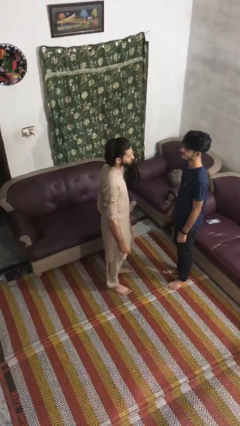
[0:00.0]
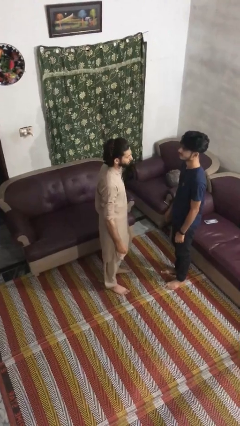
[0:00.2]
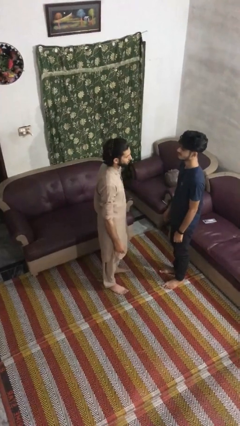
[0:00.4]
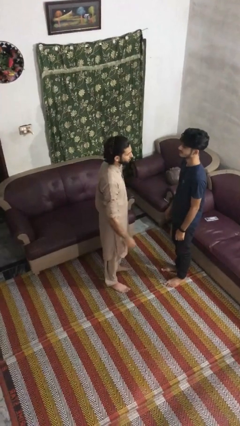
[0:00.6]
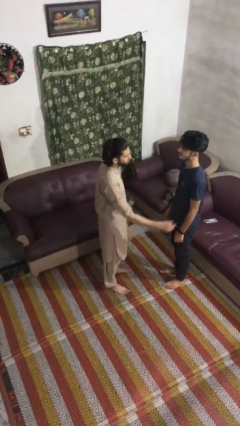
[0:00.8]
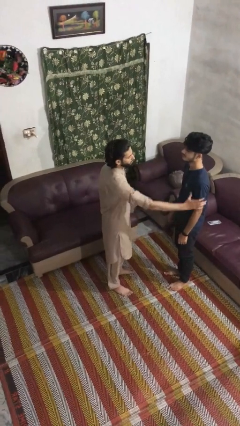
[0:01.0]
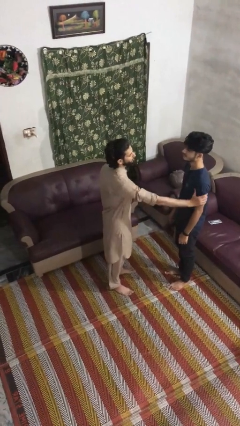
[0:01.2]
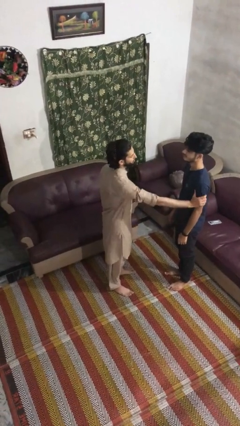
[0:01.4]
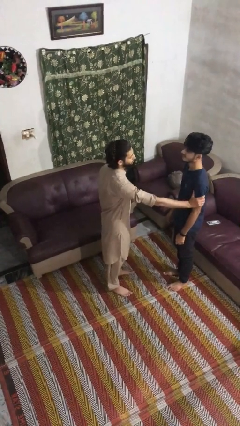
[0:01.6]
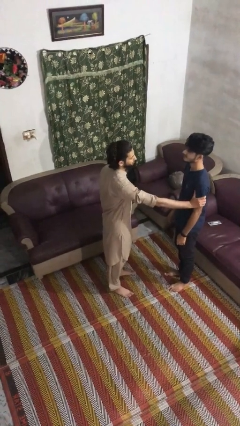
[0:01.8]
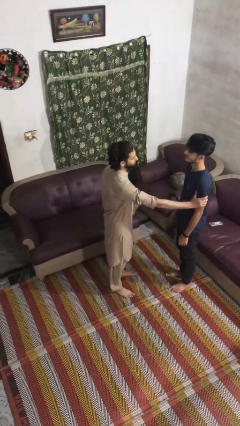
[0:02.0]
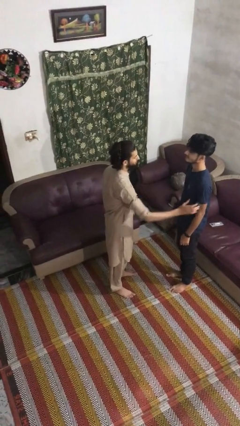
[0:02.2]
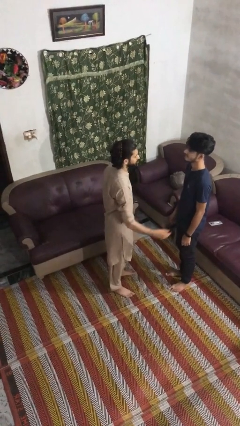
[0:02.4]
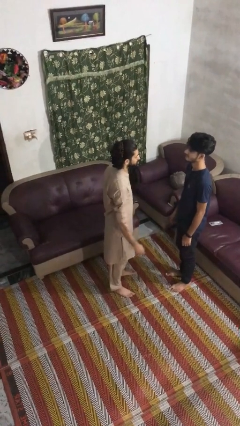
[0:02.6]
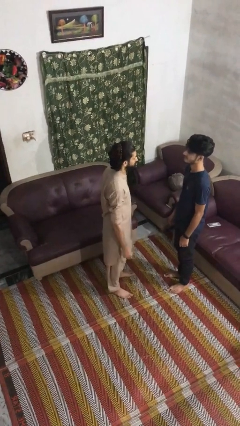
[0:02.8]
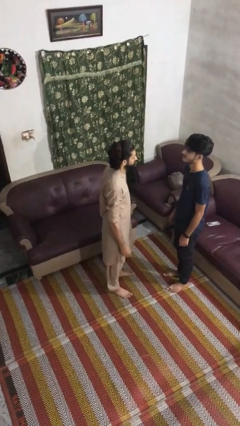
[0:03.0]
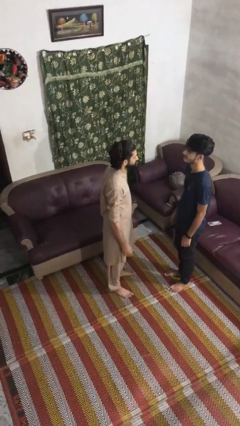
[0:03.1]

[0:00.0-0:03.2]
person grabs person by bicep

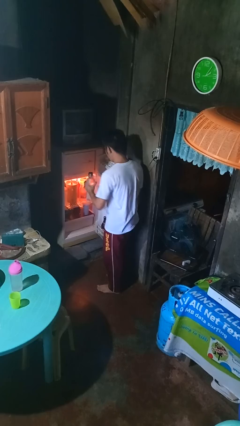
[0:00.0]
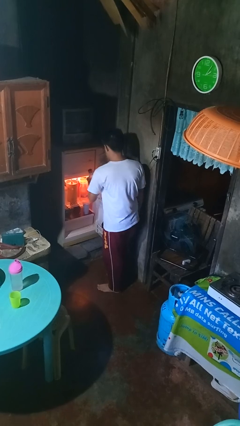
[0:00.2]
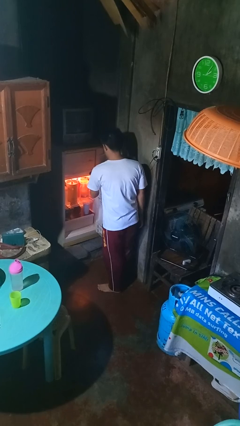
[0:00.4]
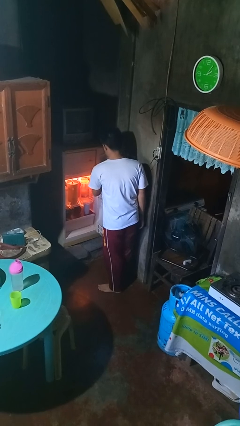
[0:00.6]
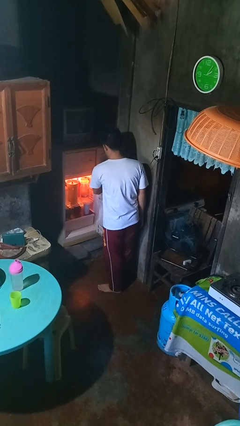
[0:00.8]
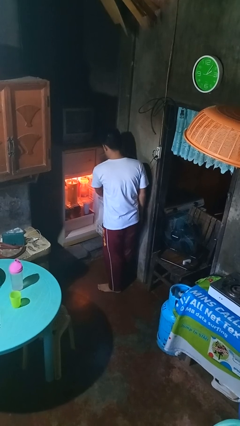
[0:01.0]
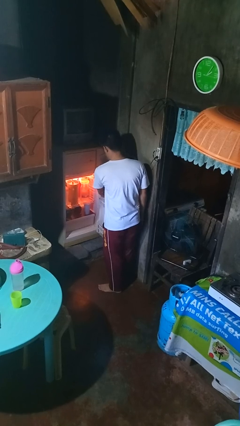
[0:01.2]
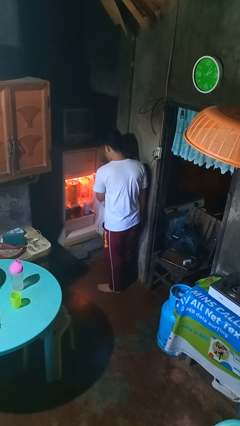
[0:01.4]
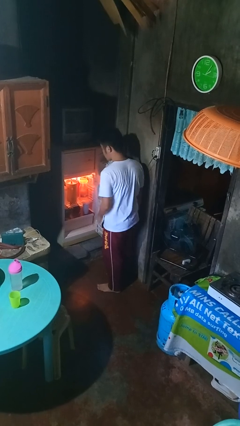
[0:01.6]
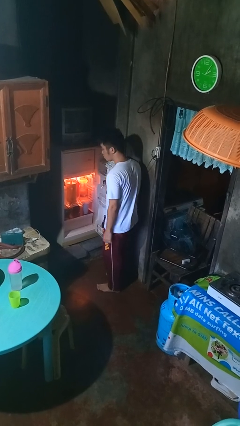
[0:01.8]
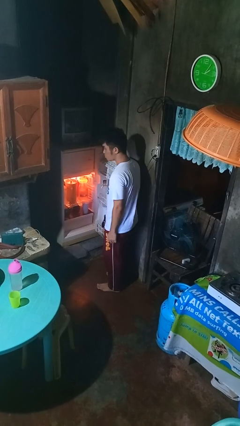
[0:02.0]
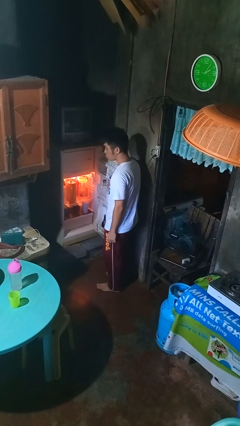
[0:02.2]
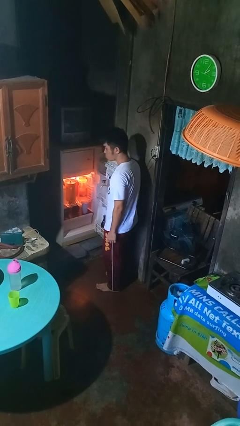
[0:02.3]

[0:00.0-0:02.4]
person puts object into refrigerator

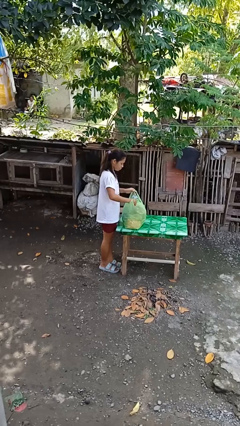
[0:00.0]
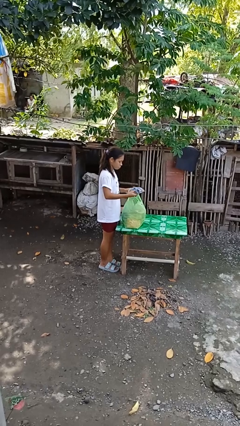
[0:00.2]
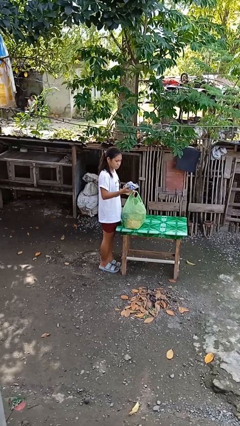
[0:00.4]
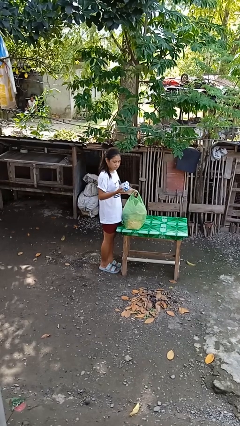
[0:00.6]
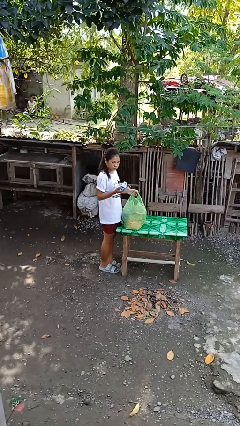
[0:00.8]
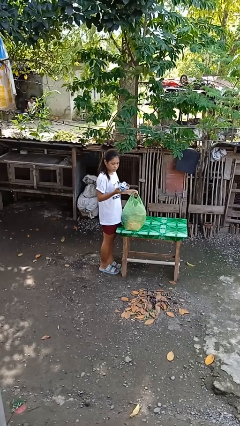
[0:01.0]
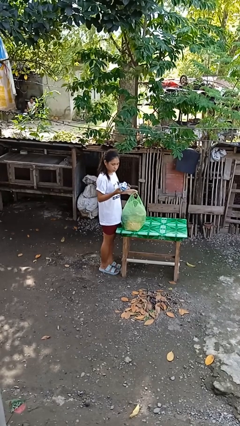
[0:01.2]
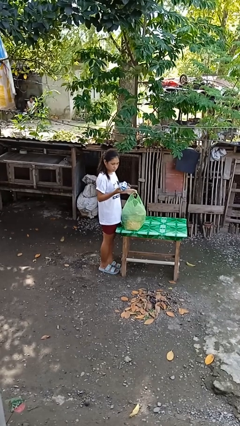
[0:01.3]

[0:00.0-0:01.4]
person hits person with pillow

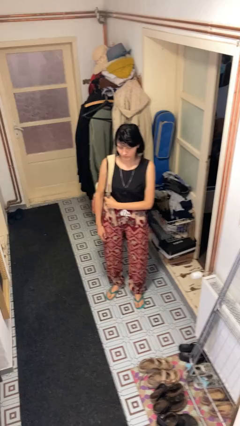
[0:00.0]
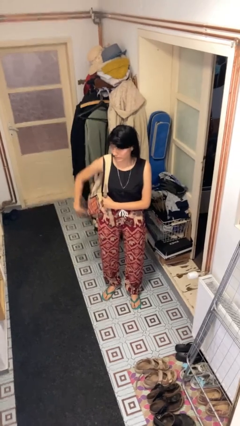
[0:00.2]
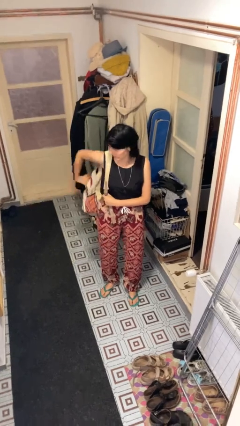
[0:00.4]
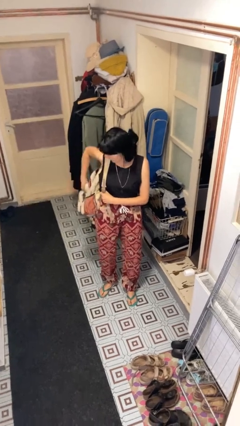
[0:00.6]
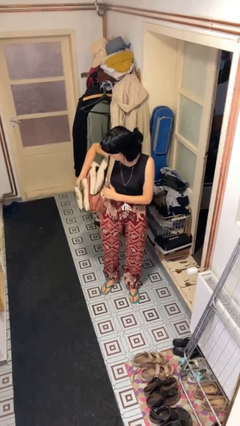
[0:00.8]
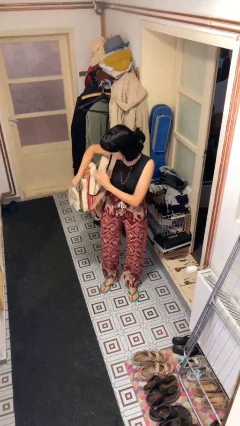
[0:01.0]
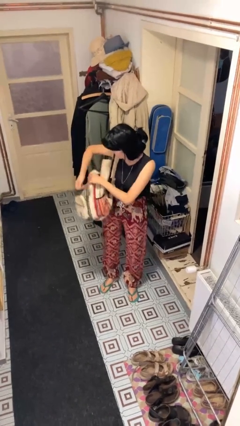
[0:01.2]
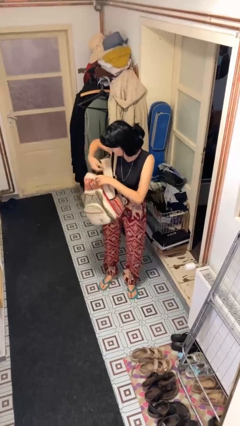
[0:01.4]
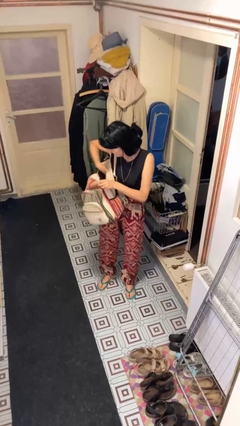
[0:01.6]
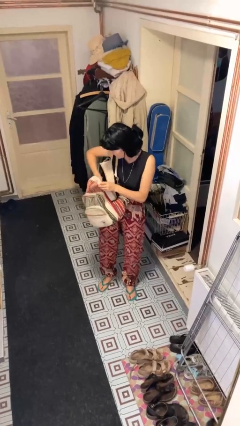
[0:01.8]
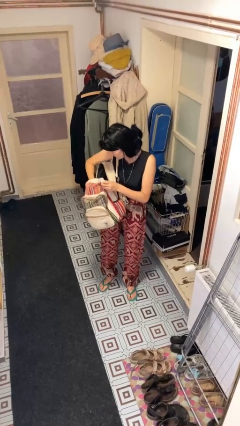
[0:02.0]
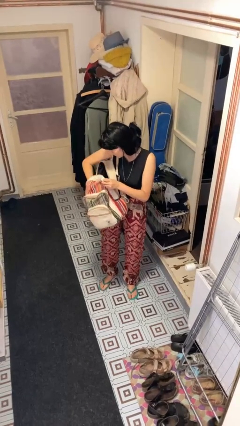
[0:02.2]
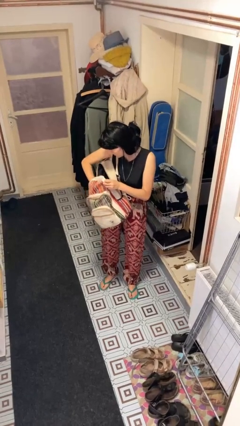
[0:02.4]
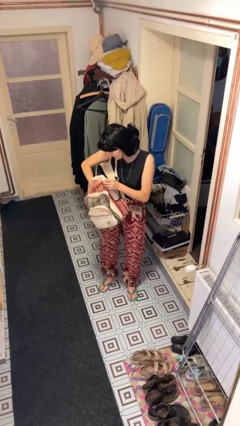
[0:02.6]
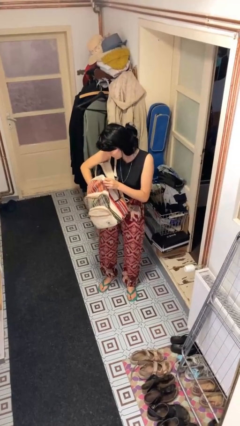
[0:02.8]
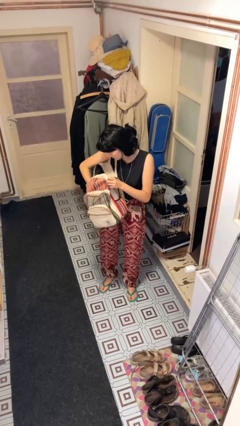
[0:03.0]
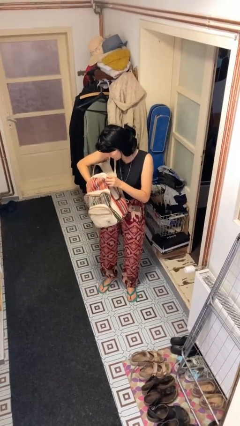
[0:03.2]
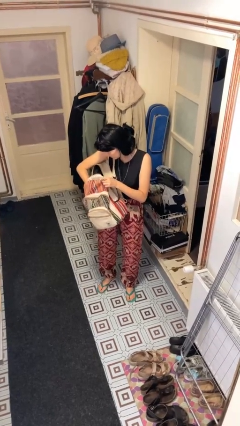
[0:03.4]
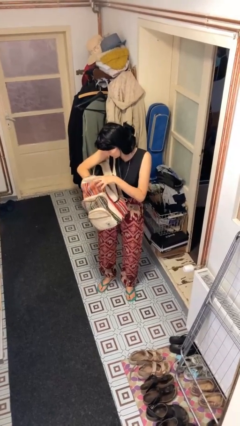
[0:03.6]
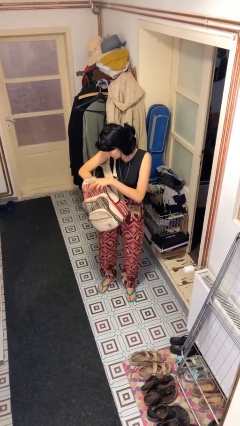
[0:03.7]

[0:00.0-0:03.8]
person searches in backpack

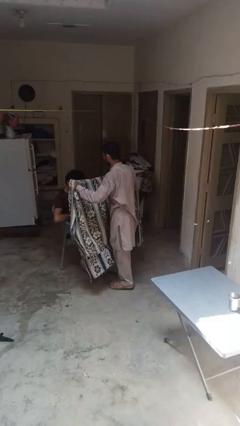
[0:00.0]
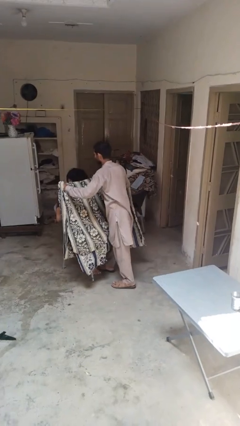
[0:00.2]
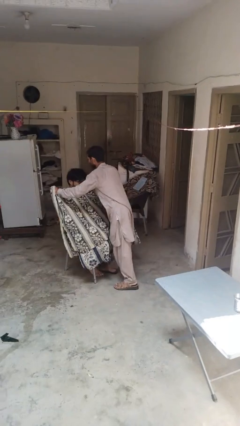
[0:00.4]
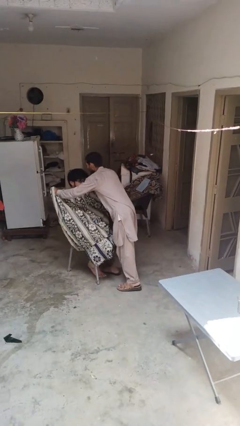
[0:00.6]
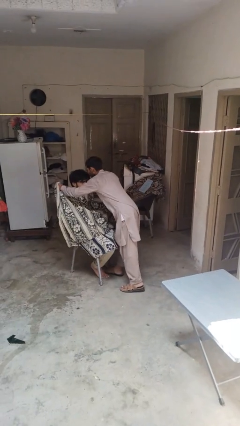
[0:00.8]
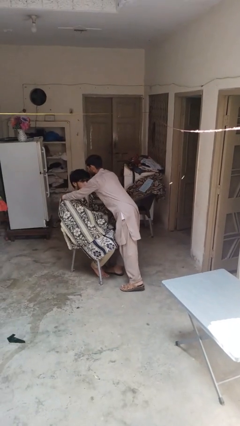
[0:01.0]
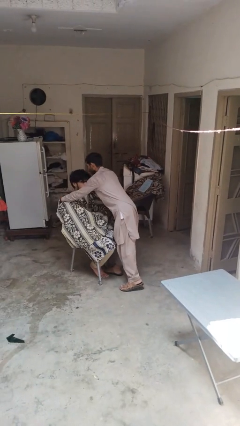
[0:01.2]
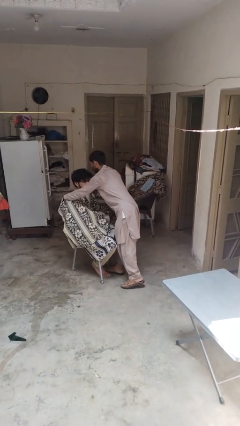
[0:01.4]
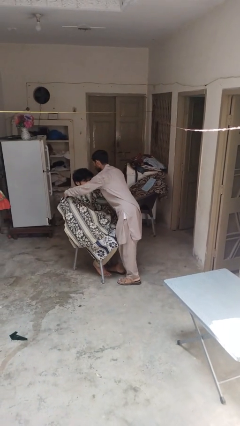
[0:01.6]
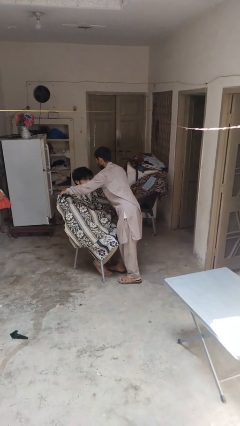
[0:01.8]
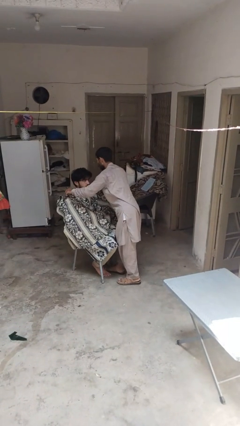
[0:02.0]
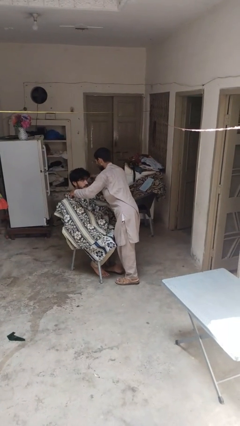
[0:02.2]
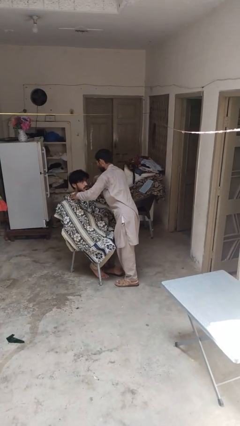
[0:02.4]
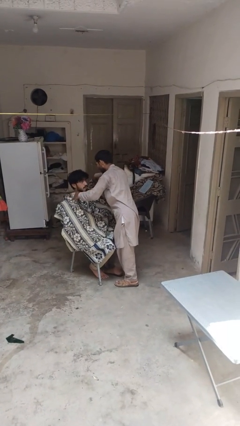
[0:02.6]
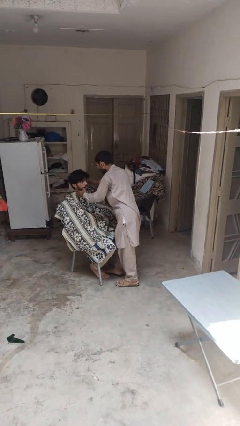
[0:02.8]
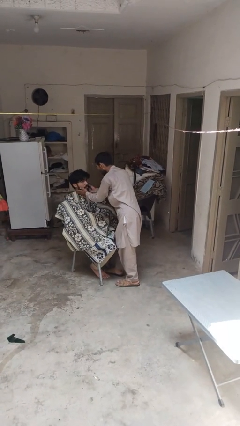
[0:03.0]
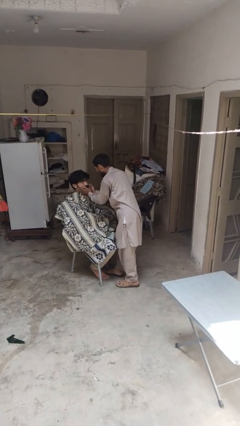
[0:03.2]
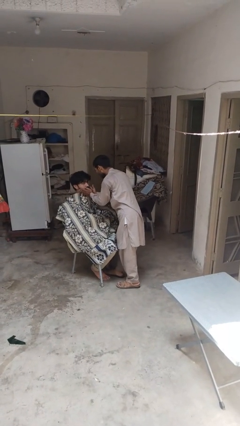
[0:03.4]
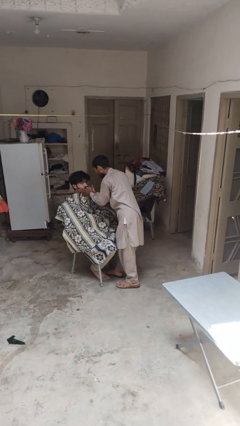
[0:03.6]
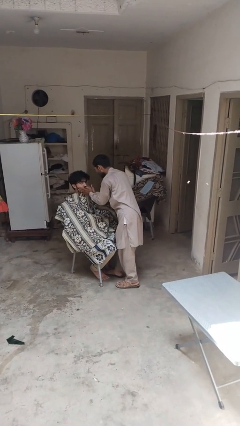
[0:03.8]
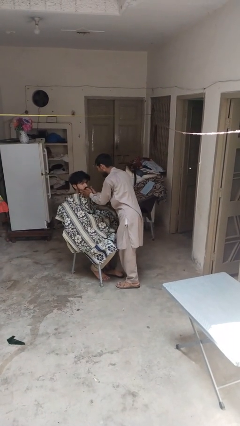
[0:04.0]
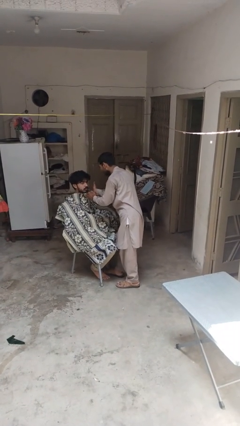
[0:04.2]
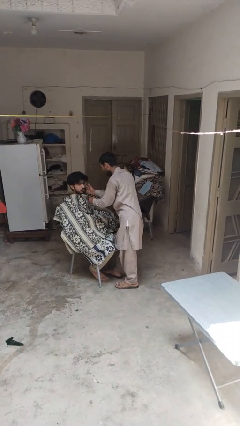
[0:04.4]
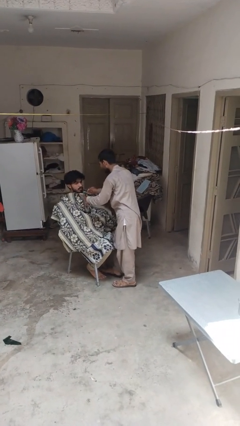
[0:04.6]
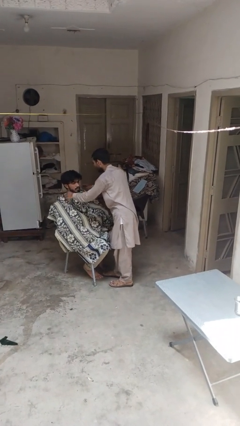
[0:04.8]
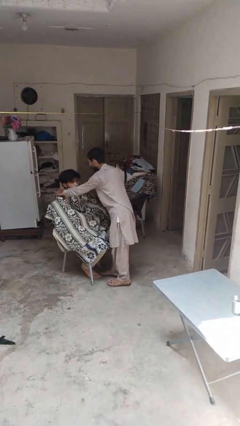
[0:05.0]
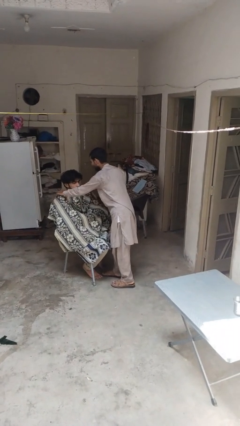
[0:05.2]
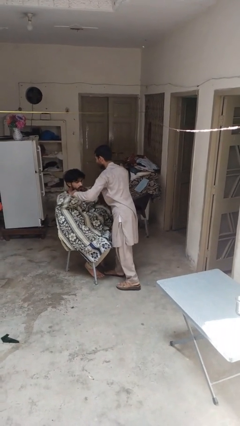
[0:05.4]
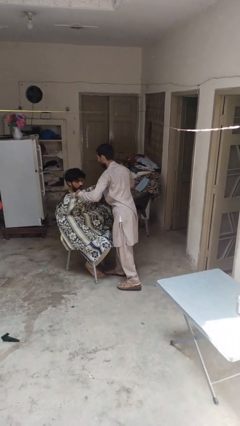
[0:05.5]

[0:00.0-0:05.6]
person covers friend with blanket

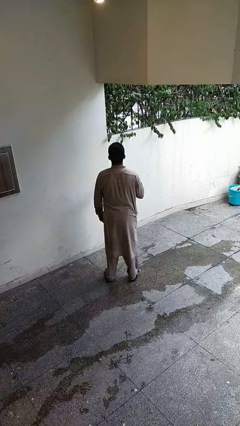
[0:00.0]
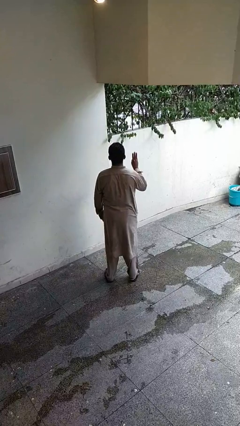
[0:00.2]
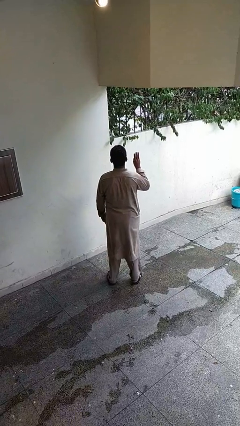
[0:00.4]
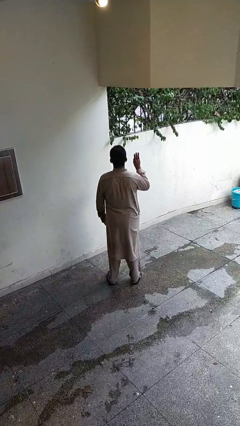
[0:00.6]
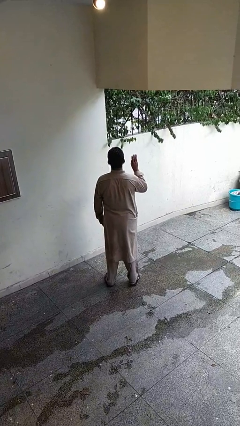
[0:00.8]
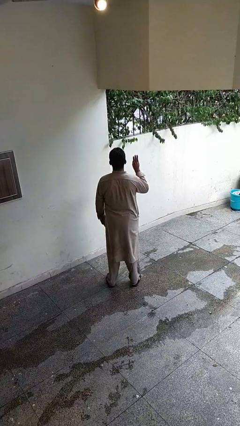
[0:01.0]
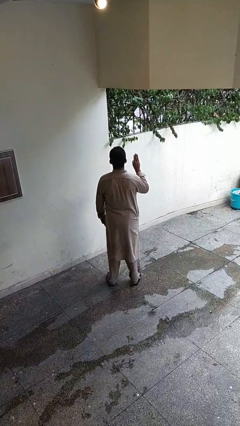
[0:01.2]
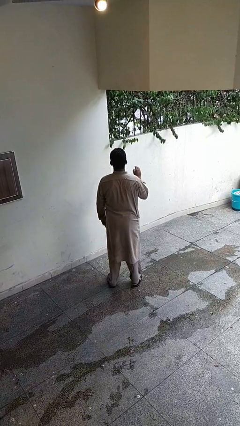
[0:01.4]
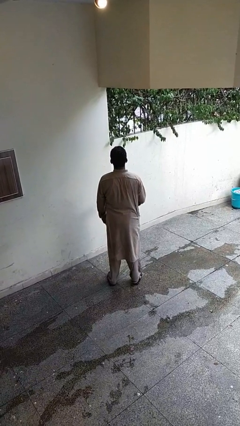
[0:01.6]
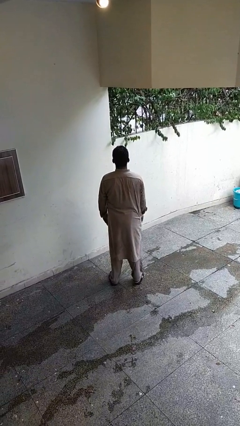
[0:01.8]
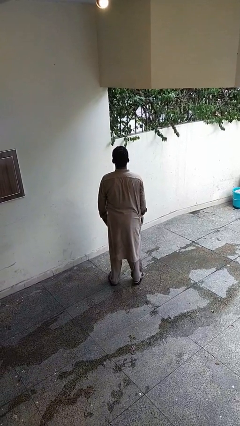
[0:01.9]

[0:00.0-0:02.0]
person gestures number three
